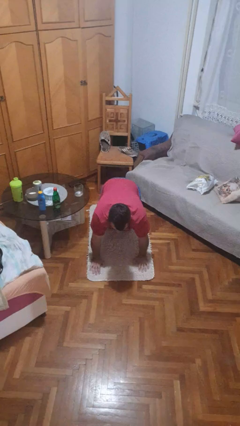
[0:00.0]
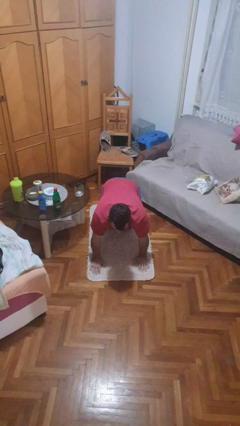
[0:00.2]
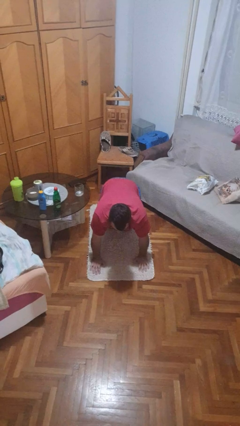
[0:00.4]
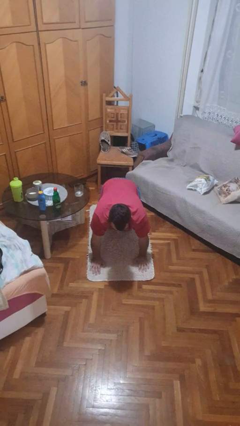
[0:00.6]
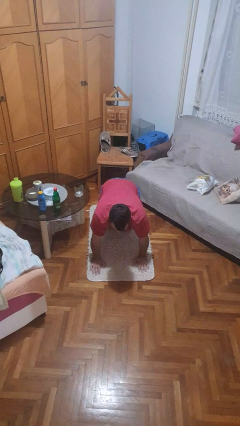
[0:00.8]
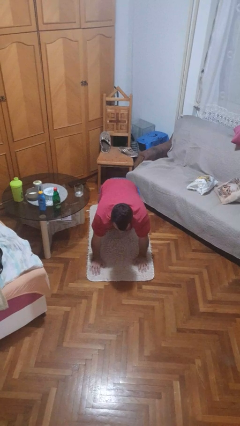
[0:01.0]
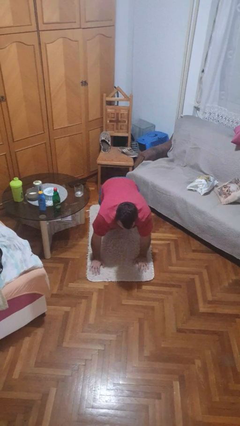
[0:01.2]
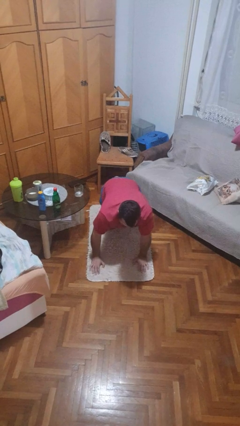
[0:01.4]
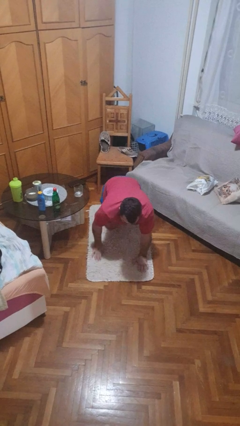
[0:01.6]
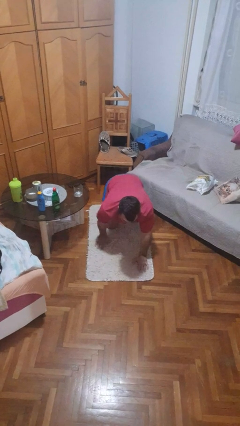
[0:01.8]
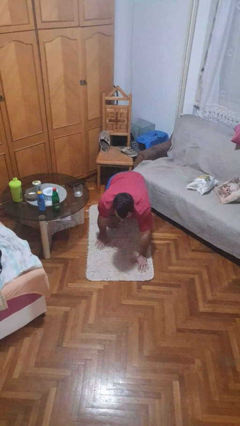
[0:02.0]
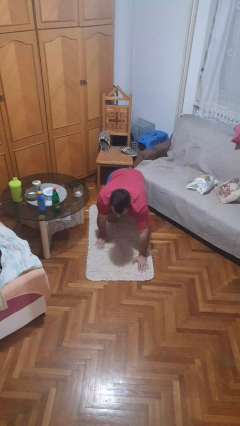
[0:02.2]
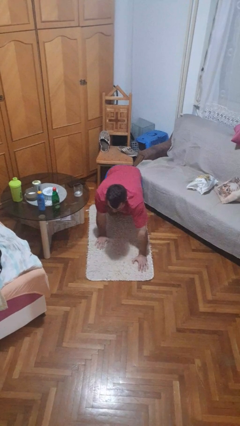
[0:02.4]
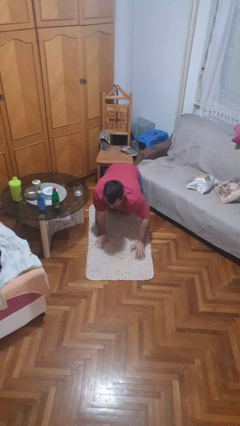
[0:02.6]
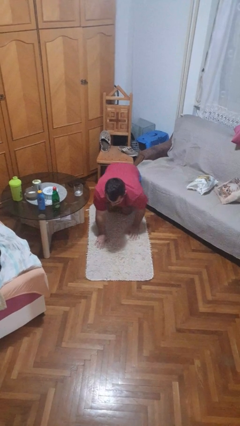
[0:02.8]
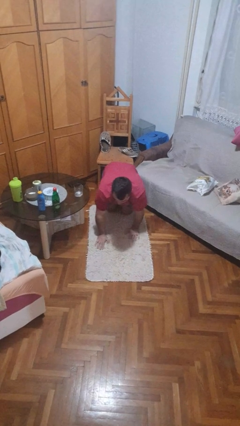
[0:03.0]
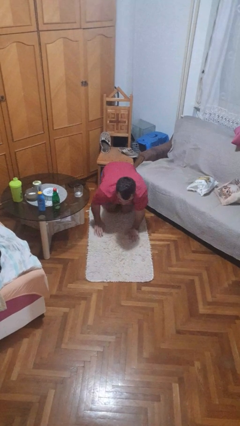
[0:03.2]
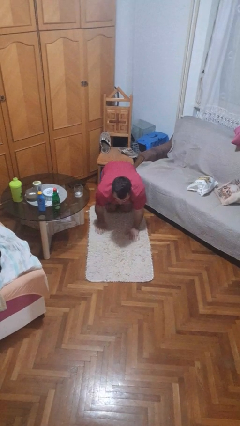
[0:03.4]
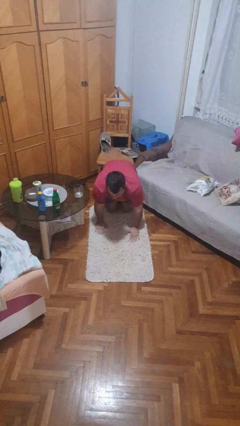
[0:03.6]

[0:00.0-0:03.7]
person crawls

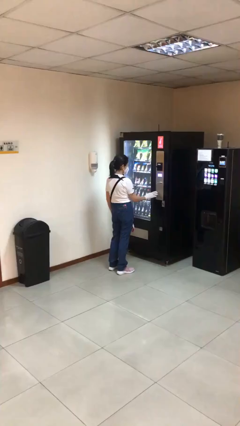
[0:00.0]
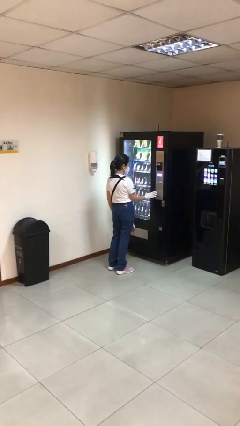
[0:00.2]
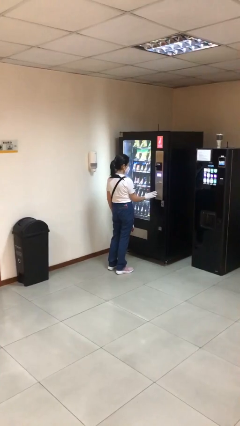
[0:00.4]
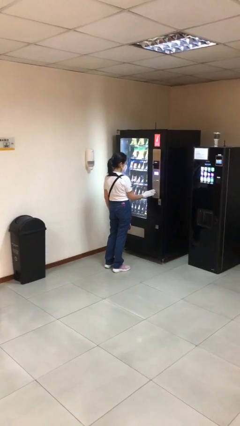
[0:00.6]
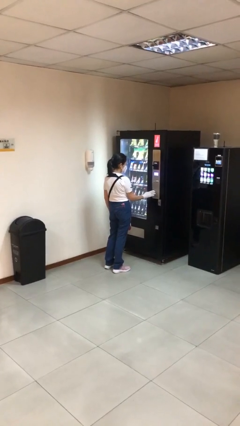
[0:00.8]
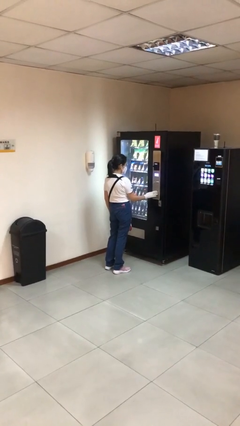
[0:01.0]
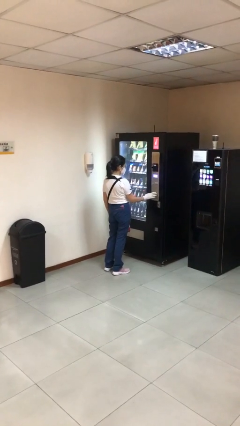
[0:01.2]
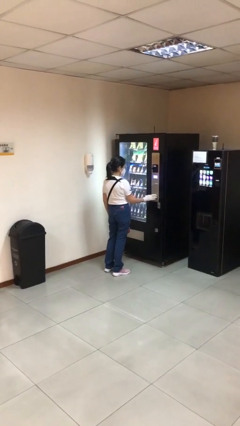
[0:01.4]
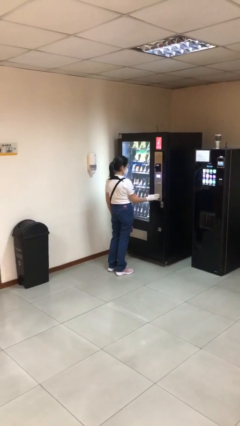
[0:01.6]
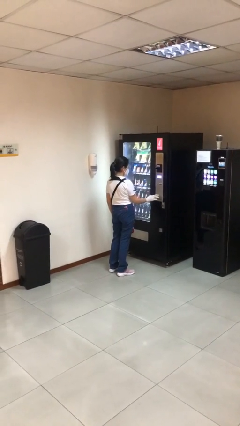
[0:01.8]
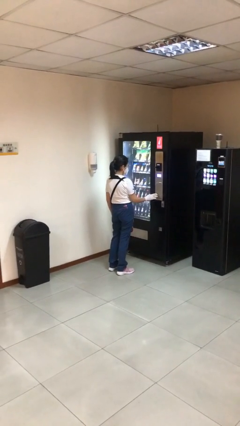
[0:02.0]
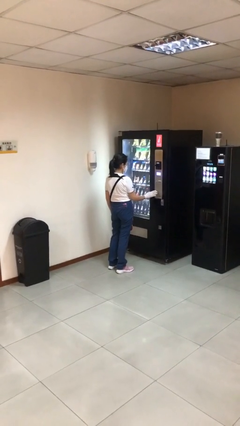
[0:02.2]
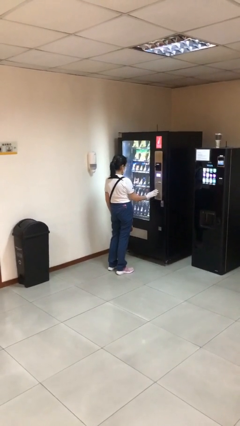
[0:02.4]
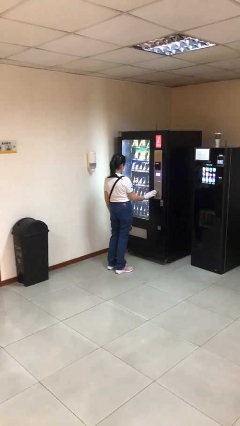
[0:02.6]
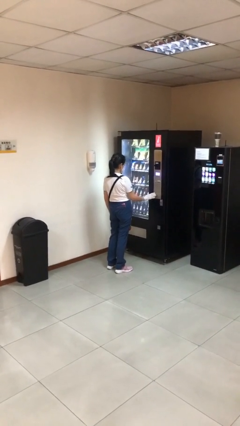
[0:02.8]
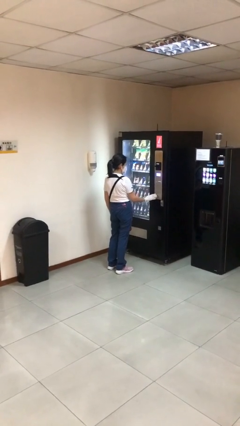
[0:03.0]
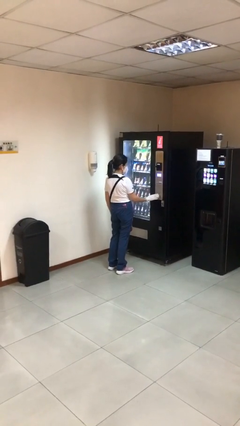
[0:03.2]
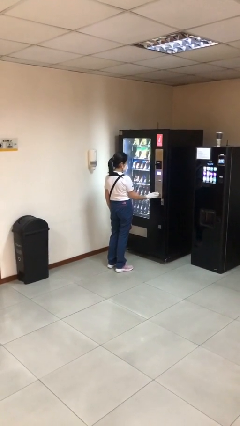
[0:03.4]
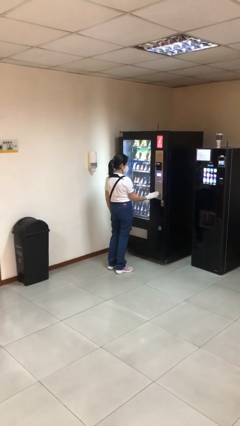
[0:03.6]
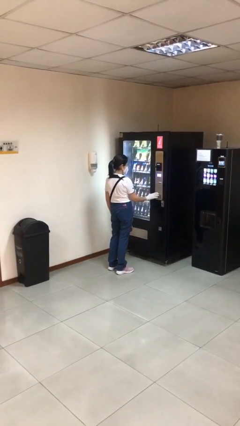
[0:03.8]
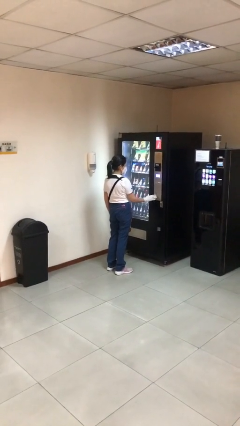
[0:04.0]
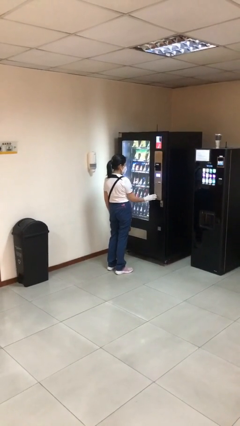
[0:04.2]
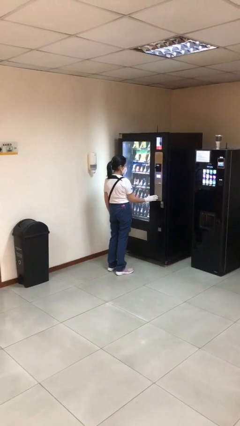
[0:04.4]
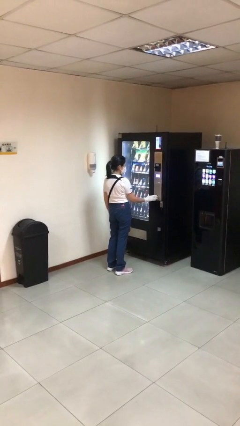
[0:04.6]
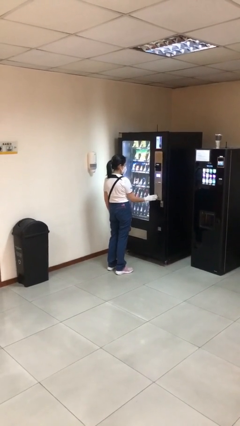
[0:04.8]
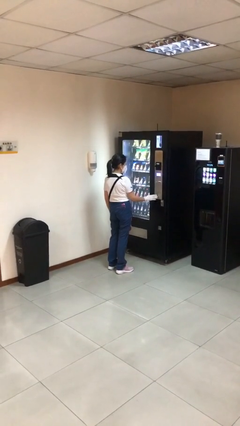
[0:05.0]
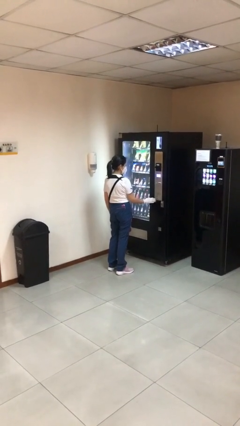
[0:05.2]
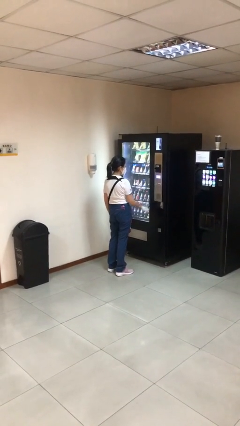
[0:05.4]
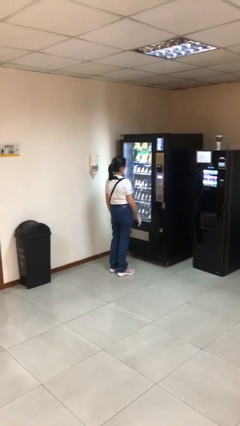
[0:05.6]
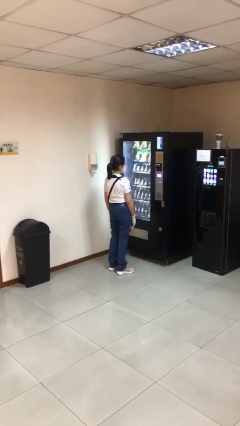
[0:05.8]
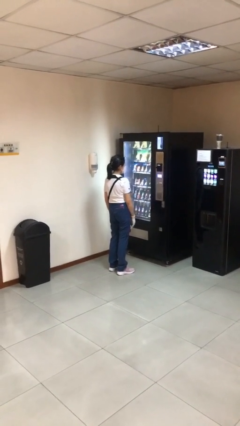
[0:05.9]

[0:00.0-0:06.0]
person purchases from machine

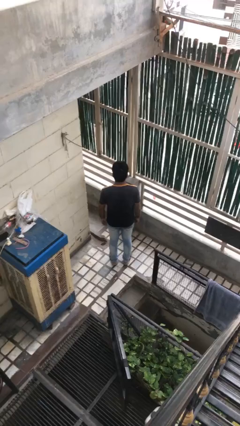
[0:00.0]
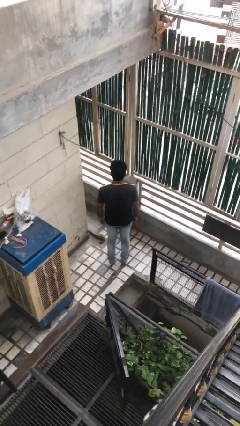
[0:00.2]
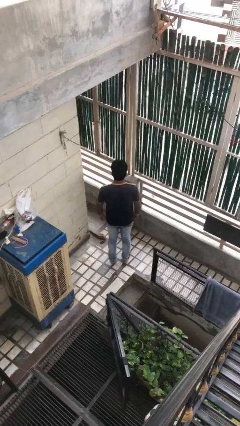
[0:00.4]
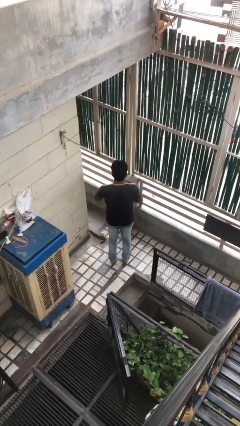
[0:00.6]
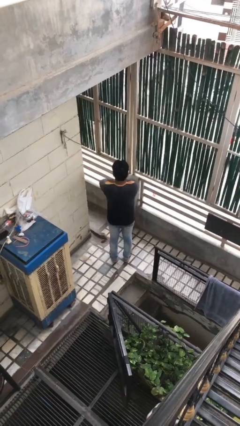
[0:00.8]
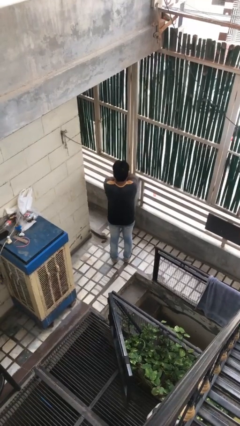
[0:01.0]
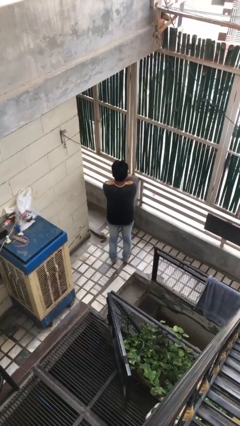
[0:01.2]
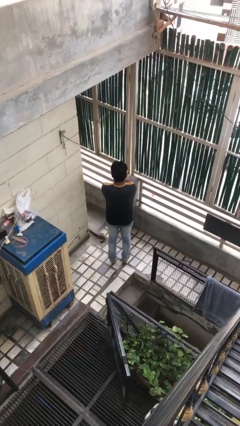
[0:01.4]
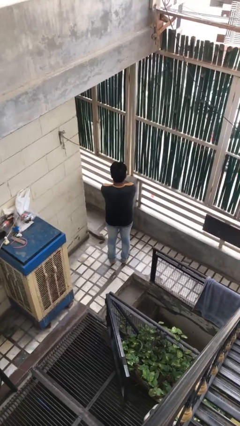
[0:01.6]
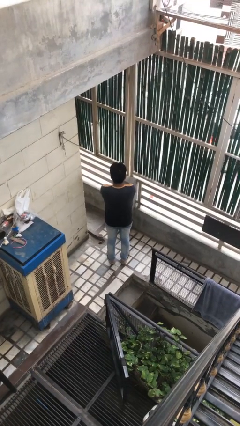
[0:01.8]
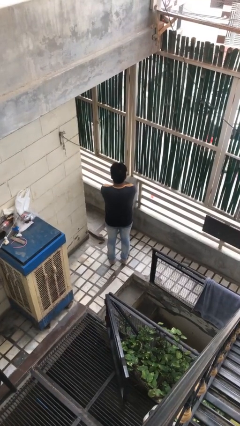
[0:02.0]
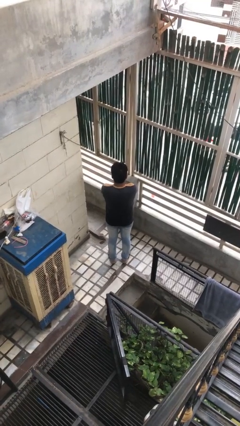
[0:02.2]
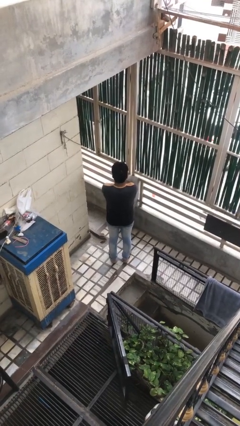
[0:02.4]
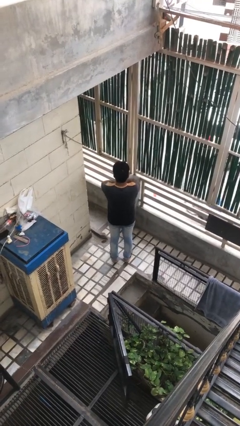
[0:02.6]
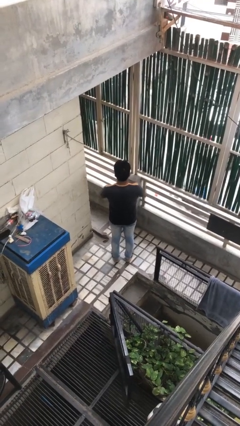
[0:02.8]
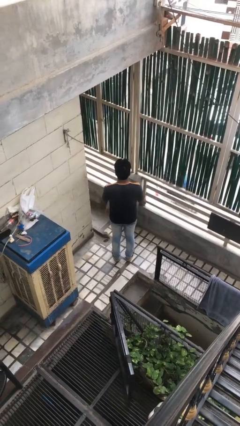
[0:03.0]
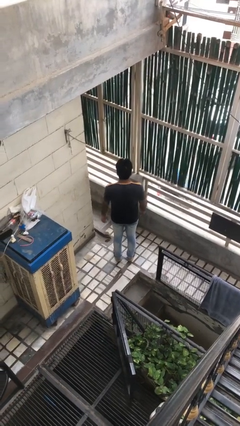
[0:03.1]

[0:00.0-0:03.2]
person crosses arms

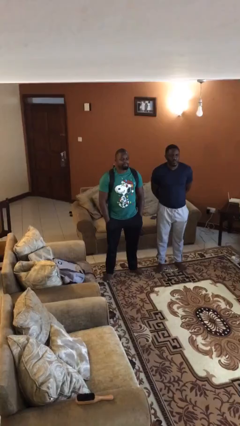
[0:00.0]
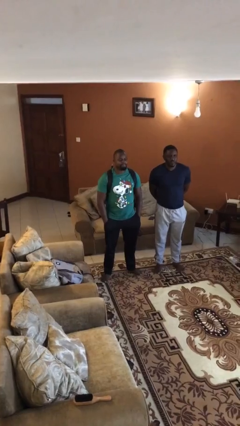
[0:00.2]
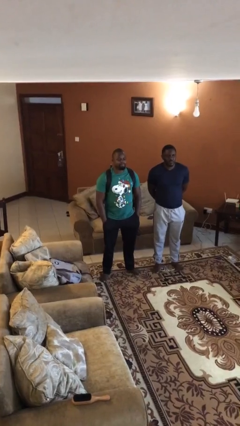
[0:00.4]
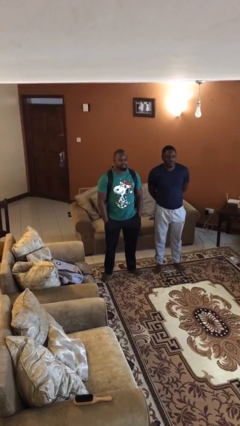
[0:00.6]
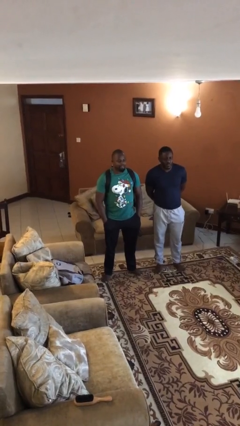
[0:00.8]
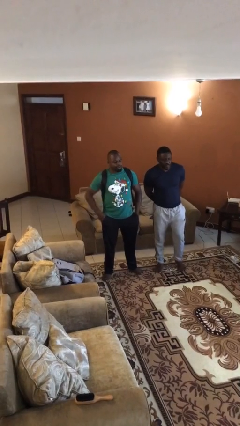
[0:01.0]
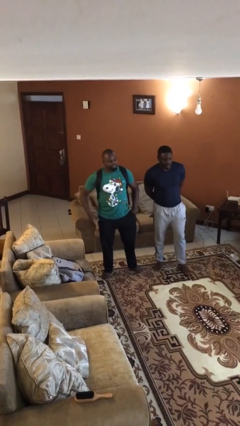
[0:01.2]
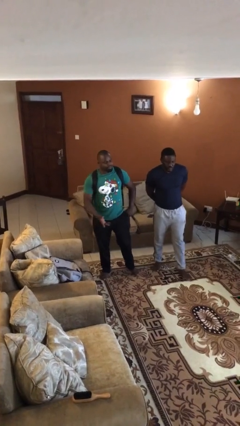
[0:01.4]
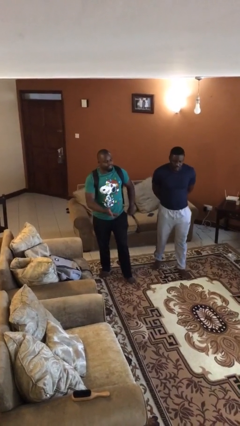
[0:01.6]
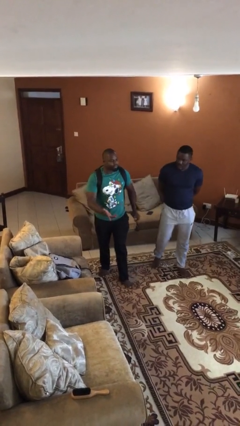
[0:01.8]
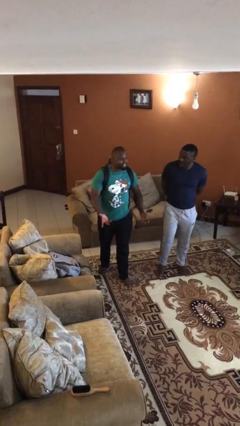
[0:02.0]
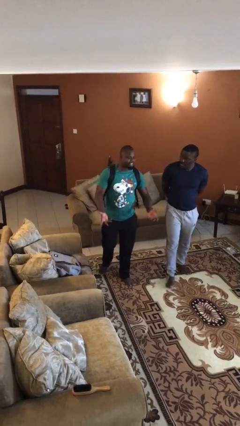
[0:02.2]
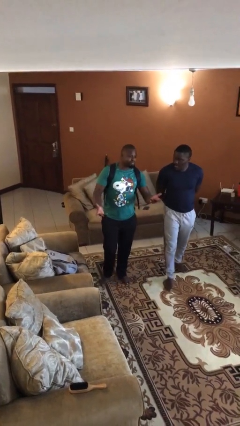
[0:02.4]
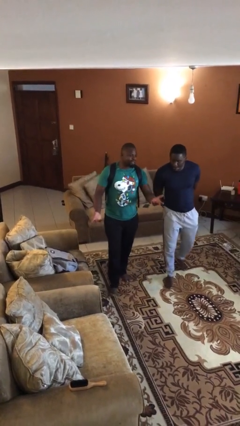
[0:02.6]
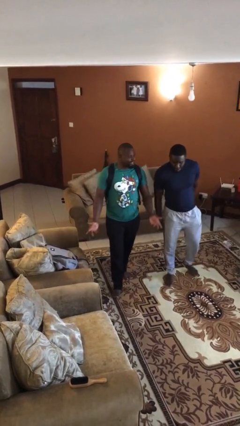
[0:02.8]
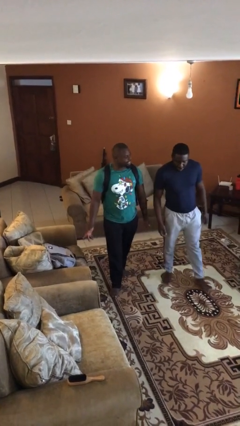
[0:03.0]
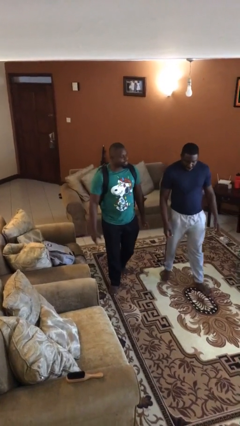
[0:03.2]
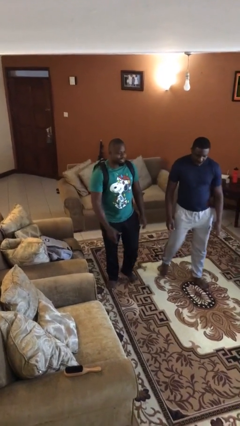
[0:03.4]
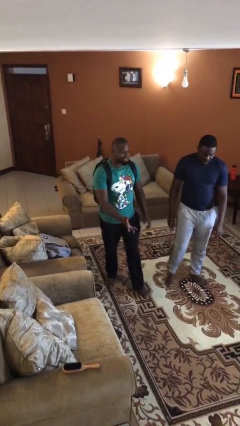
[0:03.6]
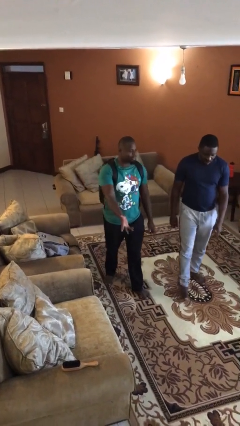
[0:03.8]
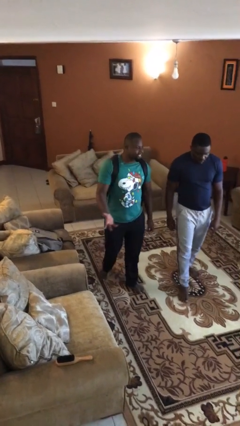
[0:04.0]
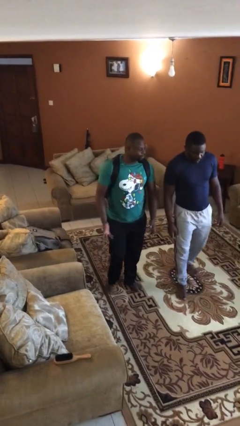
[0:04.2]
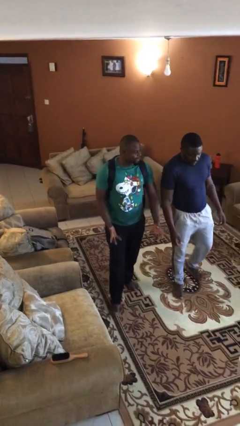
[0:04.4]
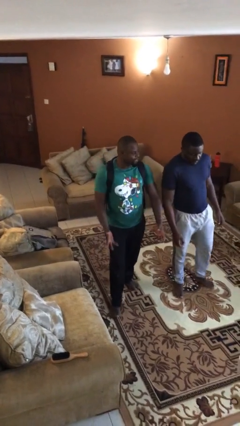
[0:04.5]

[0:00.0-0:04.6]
person talks to person

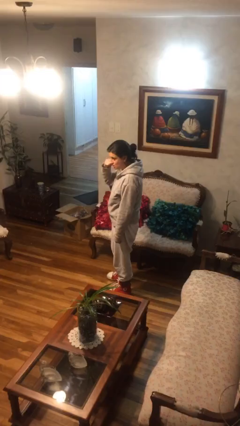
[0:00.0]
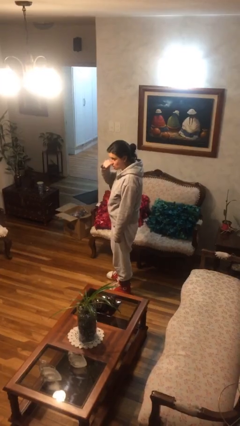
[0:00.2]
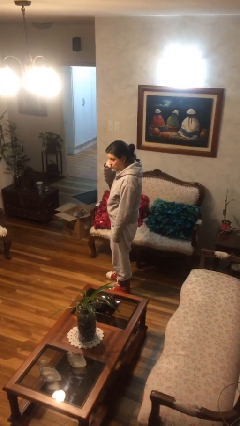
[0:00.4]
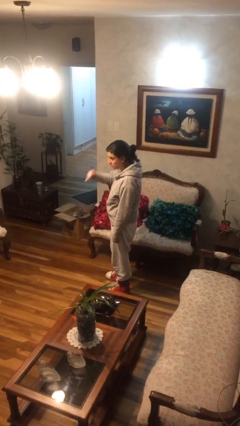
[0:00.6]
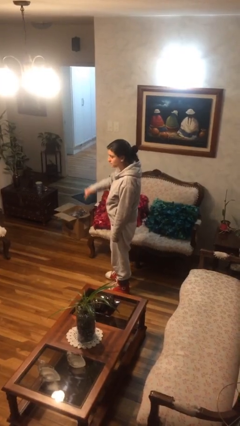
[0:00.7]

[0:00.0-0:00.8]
person gestures call me
